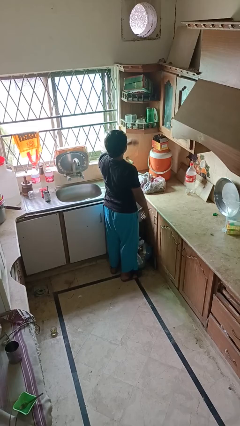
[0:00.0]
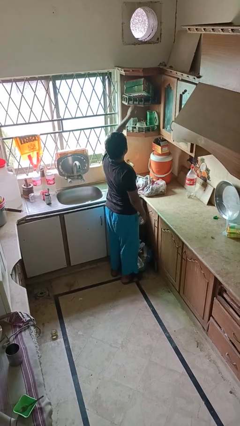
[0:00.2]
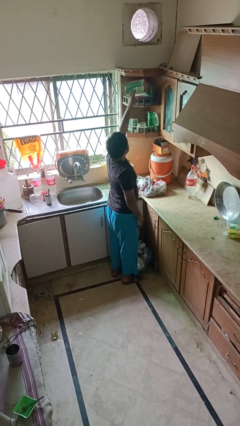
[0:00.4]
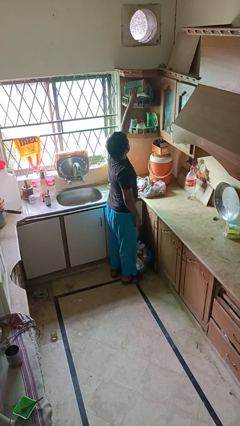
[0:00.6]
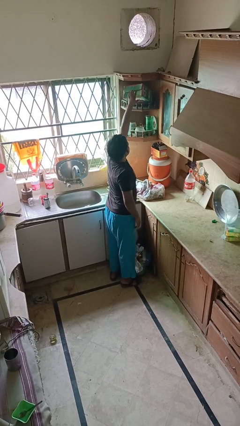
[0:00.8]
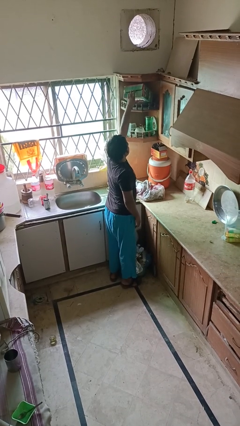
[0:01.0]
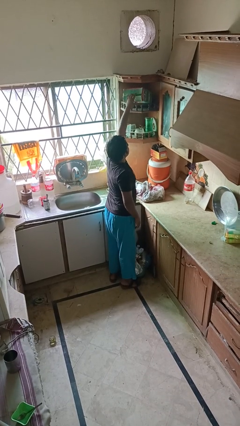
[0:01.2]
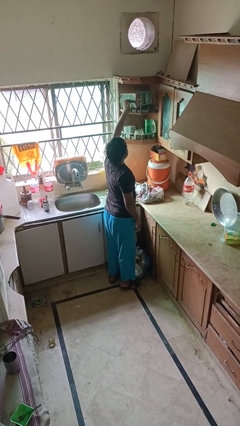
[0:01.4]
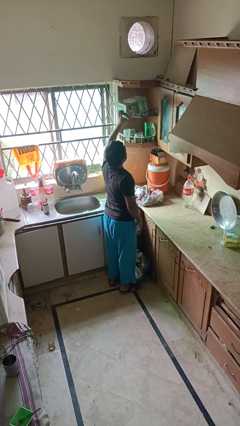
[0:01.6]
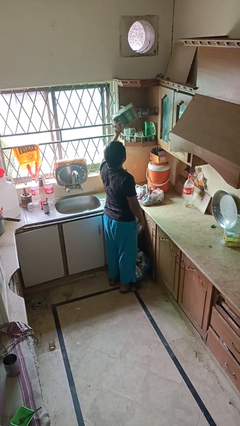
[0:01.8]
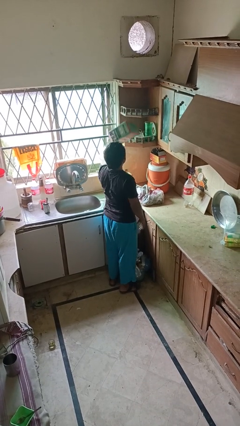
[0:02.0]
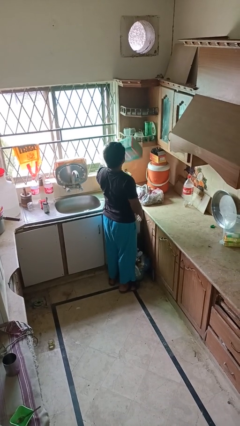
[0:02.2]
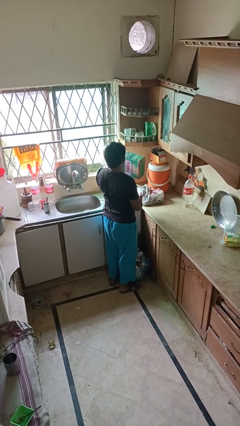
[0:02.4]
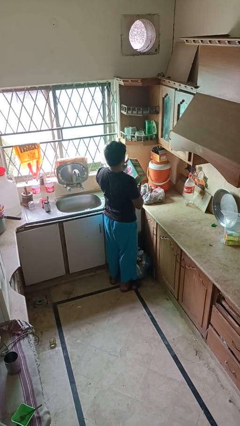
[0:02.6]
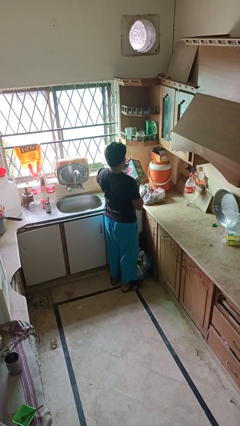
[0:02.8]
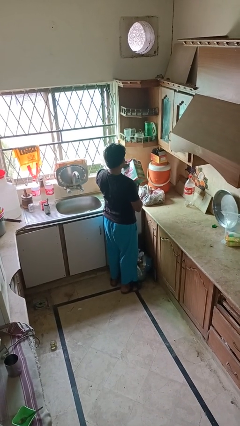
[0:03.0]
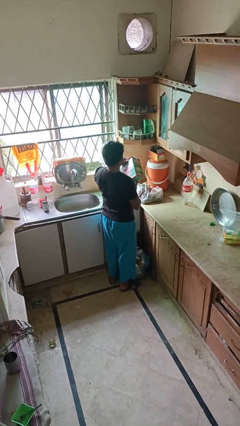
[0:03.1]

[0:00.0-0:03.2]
person picks up object from shelf

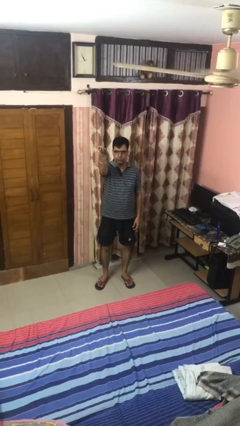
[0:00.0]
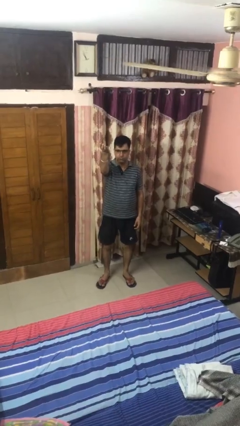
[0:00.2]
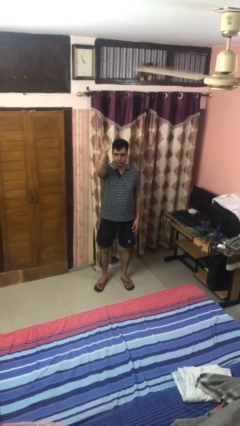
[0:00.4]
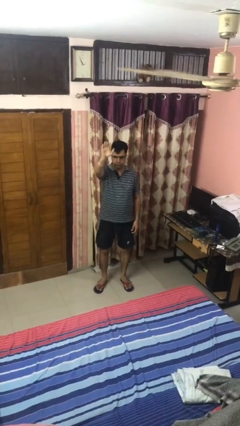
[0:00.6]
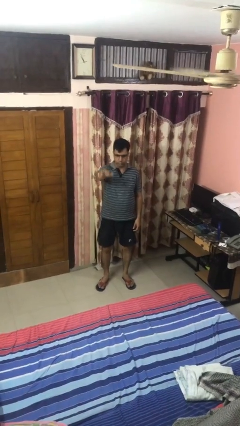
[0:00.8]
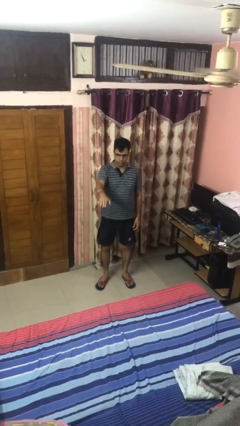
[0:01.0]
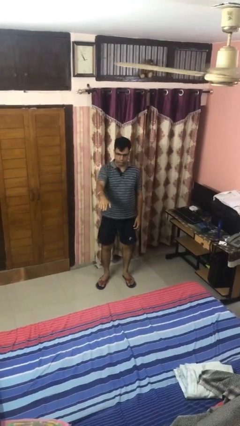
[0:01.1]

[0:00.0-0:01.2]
person gestures swipe down

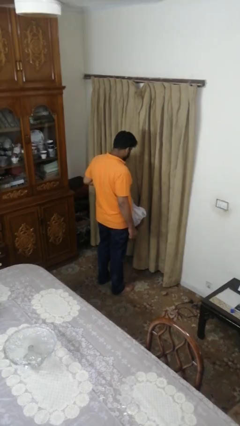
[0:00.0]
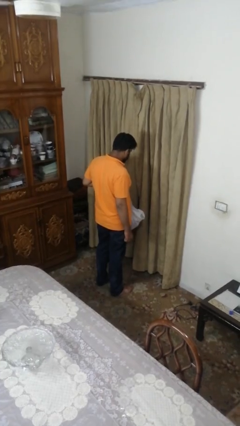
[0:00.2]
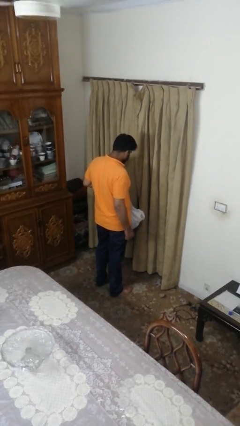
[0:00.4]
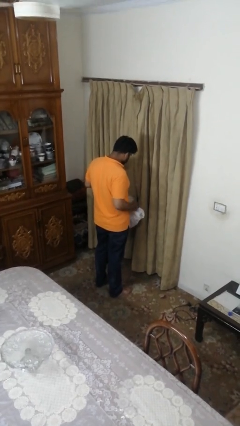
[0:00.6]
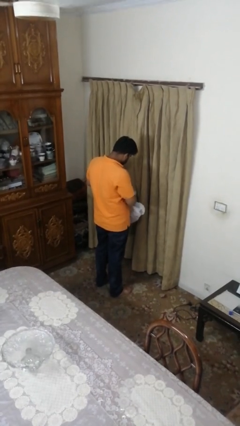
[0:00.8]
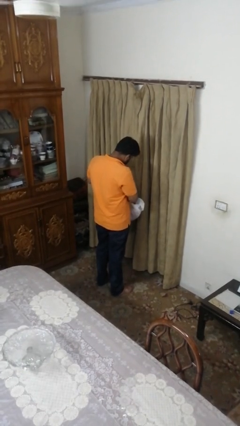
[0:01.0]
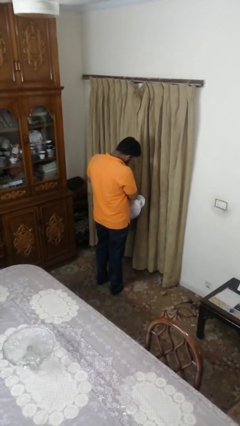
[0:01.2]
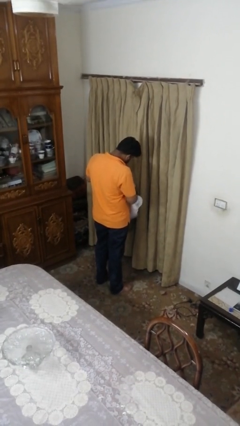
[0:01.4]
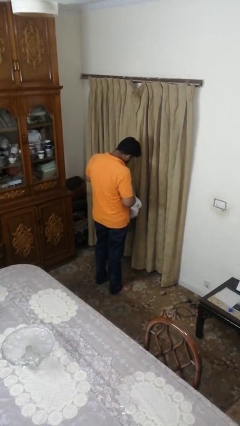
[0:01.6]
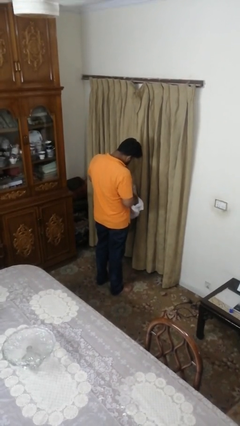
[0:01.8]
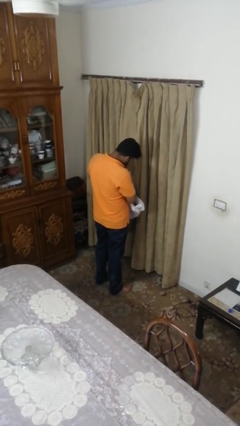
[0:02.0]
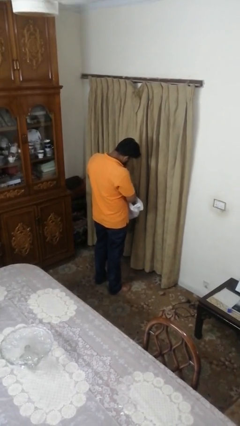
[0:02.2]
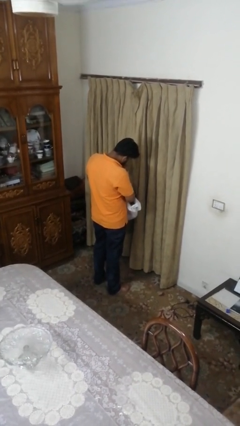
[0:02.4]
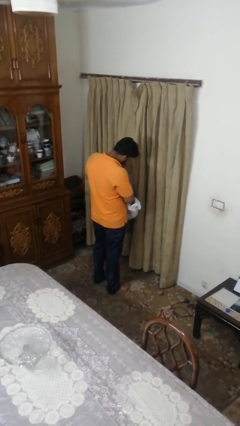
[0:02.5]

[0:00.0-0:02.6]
person searches in bag

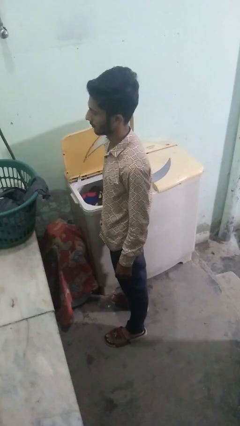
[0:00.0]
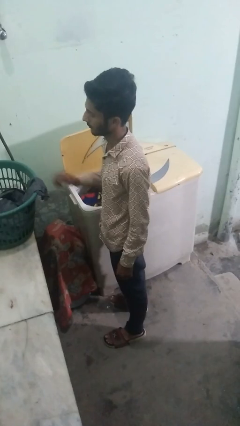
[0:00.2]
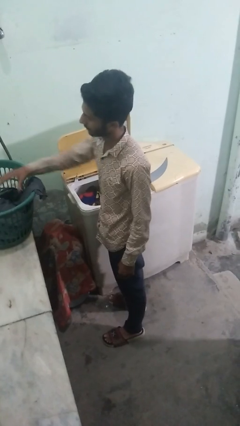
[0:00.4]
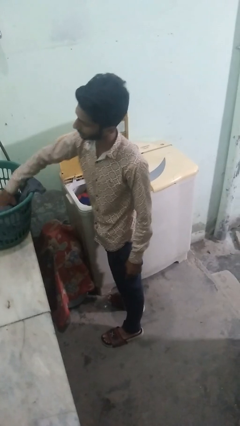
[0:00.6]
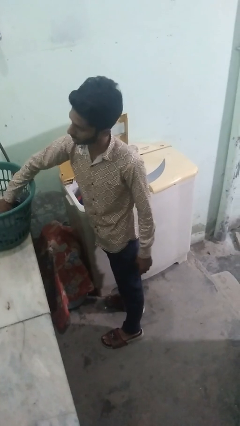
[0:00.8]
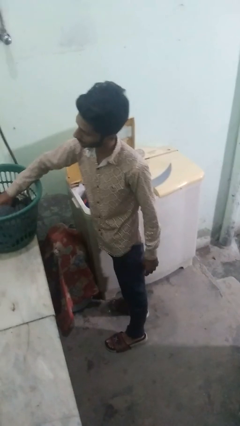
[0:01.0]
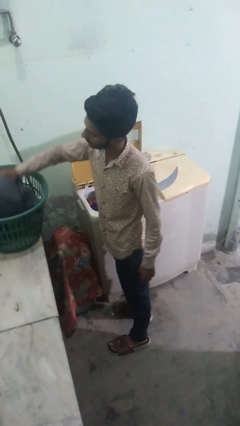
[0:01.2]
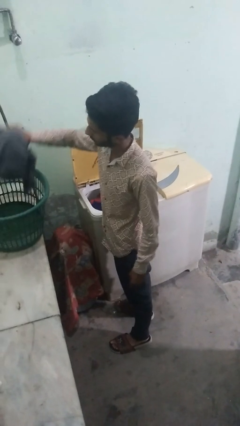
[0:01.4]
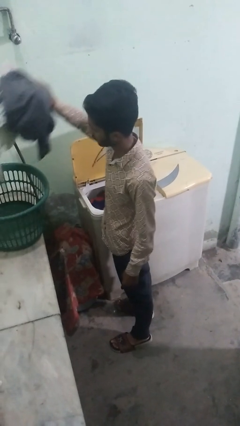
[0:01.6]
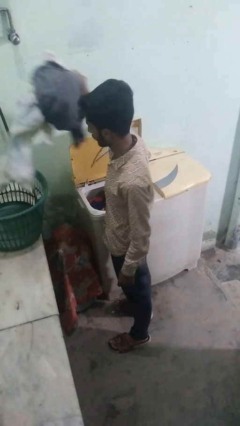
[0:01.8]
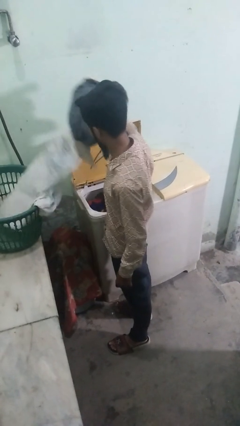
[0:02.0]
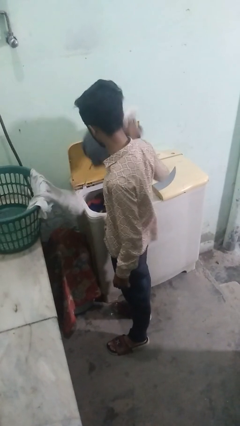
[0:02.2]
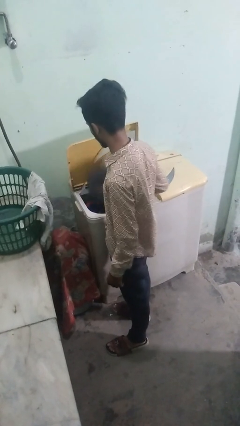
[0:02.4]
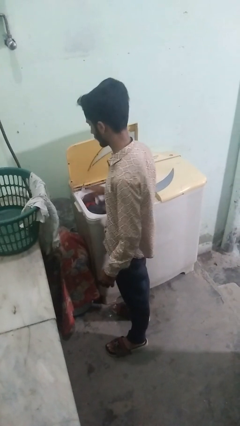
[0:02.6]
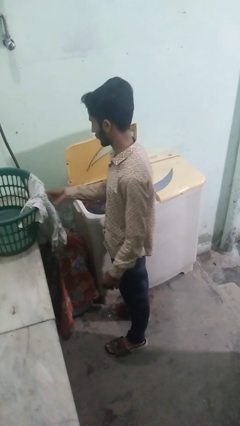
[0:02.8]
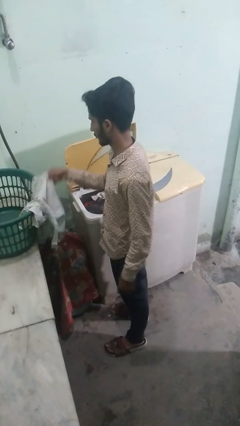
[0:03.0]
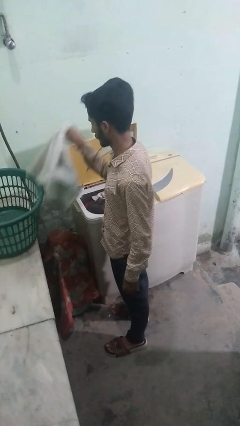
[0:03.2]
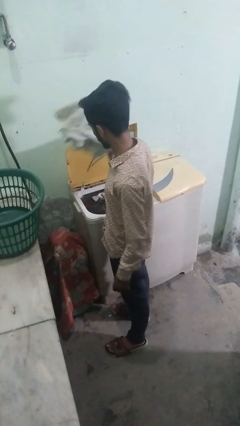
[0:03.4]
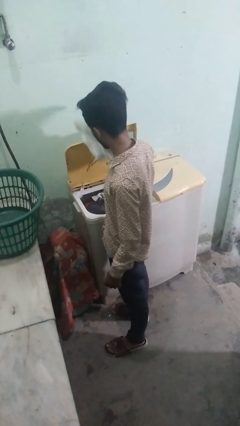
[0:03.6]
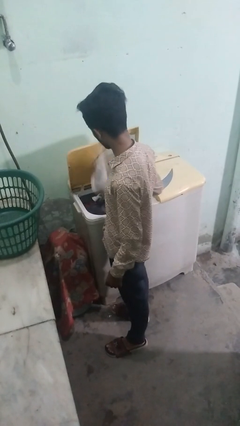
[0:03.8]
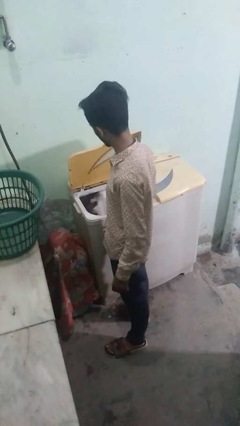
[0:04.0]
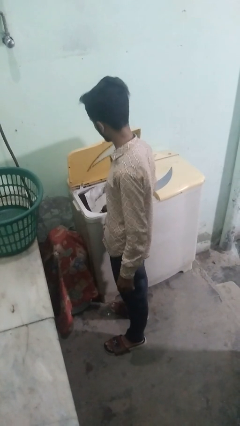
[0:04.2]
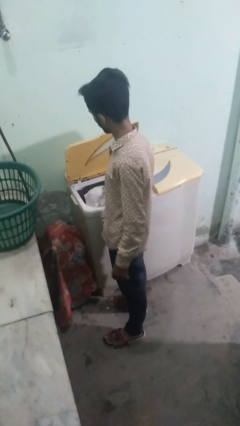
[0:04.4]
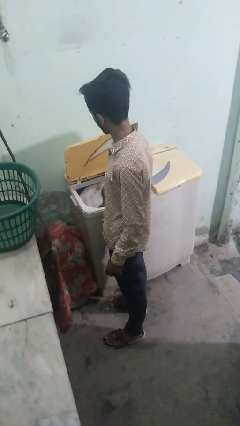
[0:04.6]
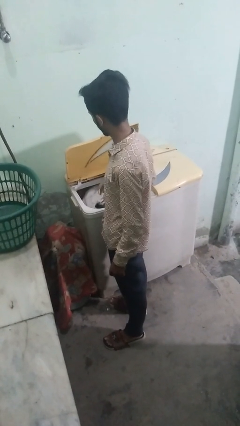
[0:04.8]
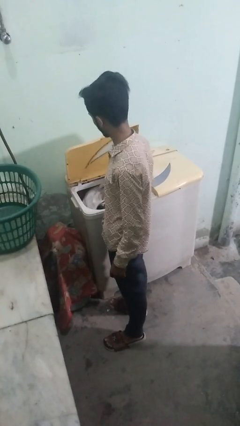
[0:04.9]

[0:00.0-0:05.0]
person loads clotheswasher

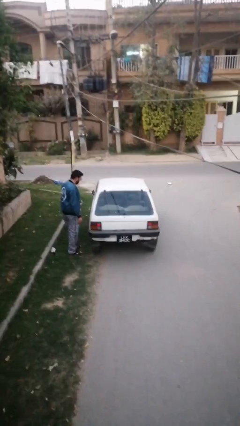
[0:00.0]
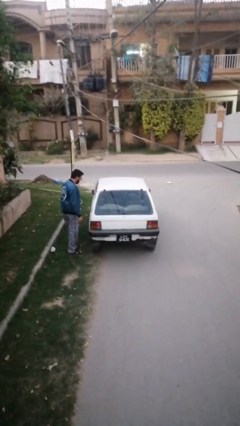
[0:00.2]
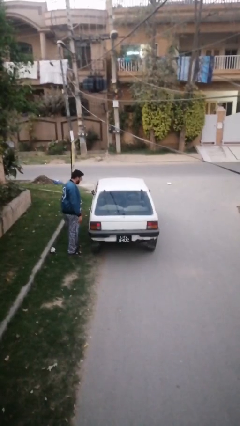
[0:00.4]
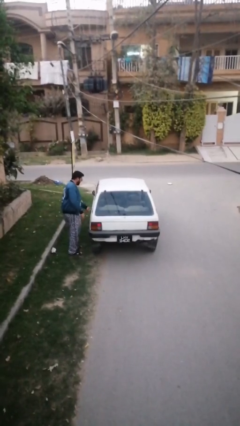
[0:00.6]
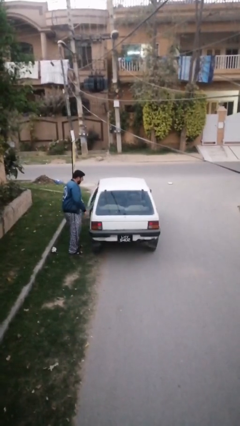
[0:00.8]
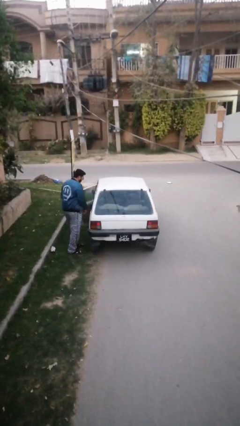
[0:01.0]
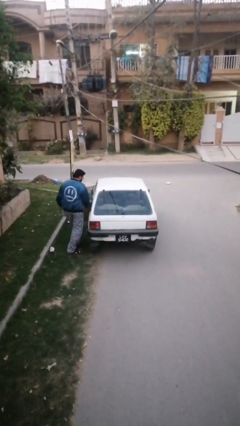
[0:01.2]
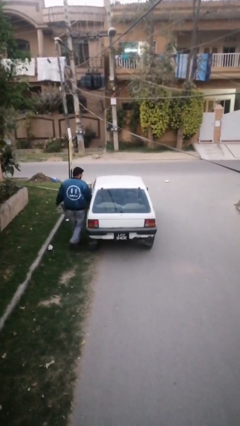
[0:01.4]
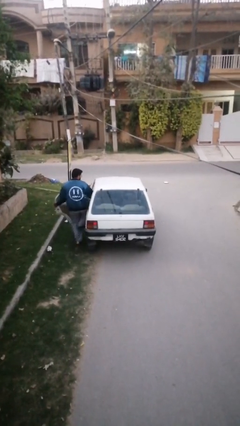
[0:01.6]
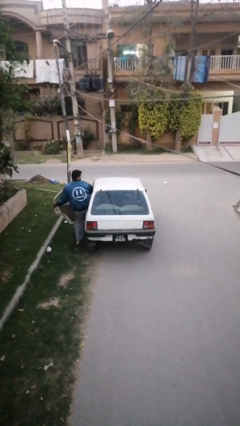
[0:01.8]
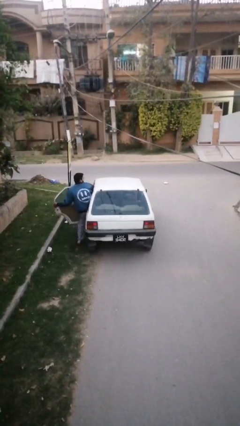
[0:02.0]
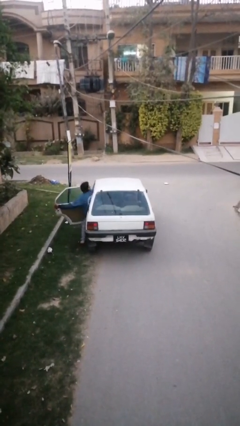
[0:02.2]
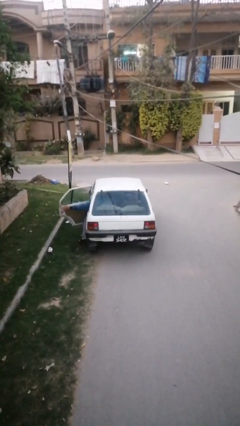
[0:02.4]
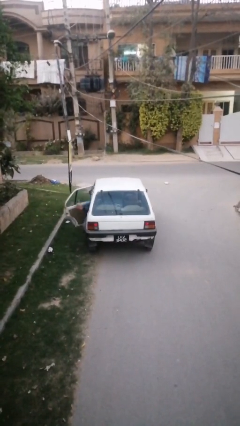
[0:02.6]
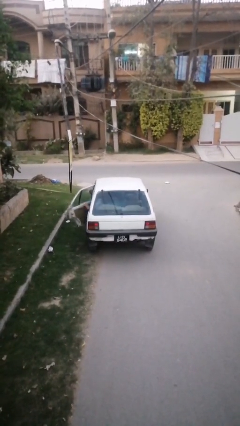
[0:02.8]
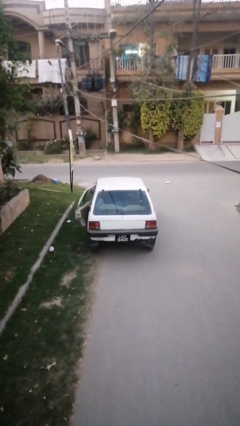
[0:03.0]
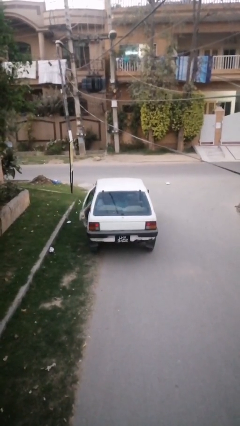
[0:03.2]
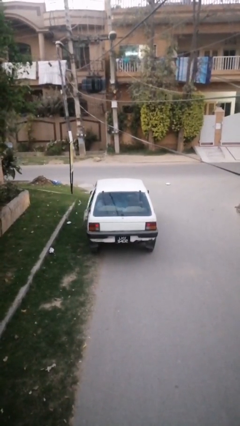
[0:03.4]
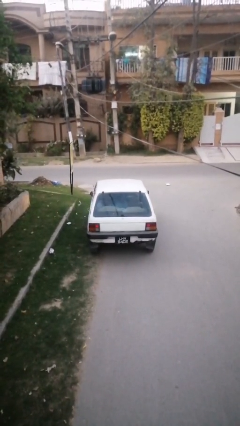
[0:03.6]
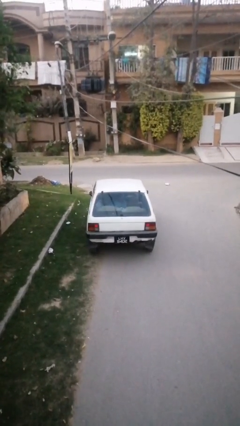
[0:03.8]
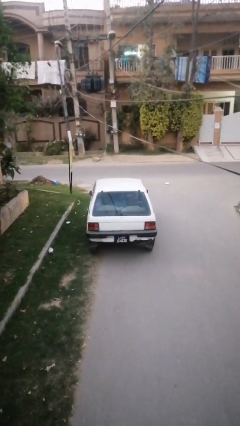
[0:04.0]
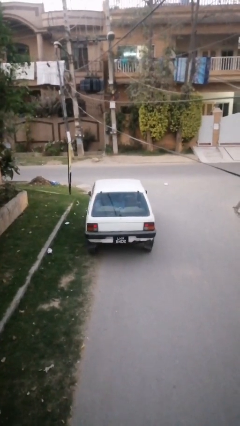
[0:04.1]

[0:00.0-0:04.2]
car picks up person

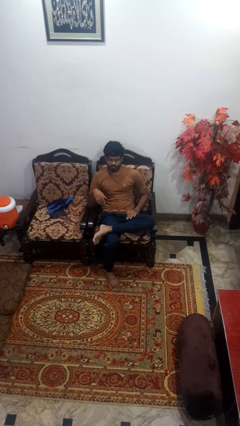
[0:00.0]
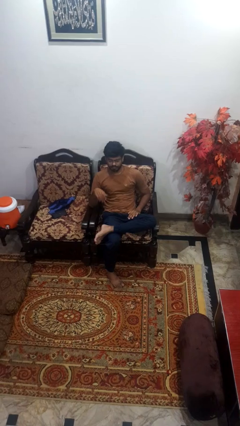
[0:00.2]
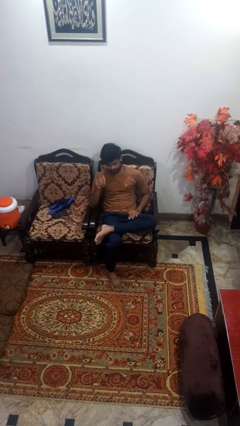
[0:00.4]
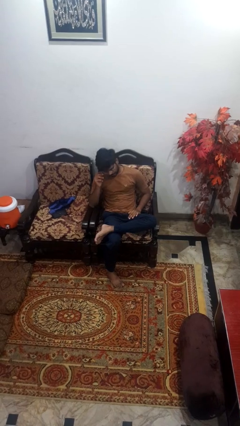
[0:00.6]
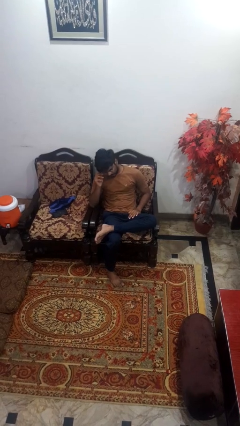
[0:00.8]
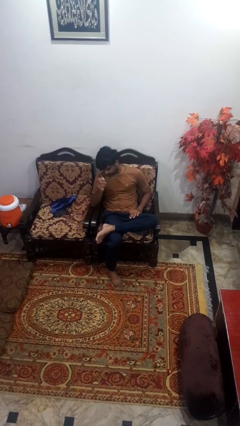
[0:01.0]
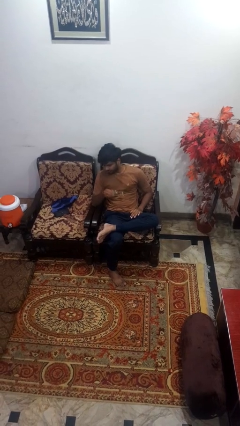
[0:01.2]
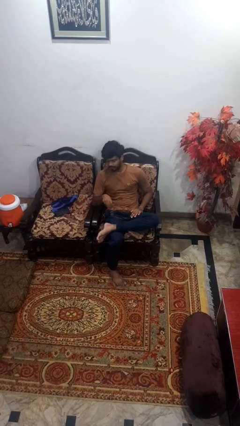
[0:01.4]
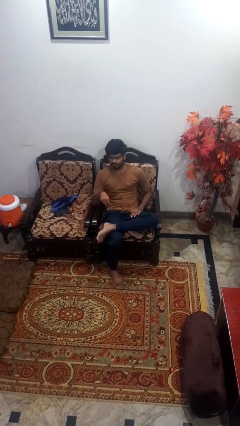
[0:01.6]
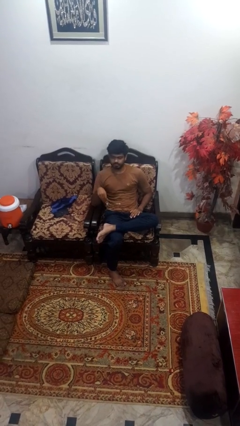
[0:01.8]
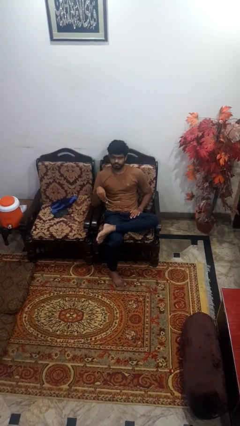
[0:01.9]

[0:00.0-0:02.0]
person takes off glasses
